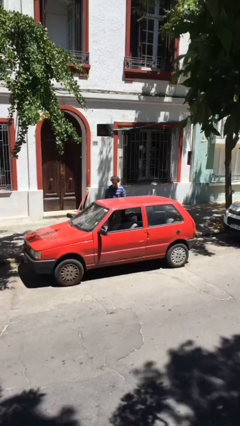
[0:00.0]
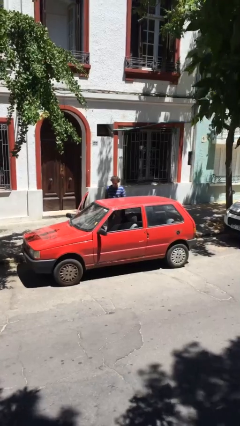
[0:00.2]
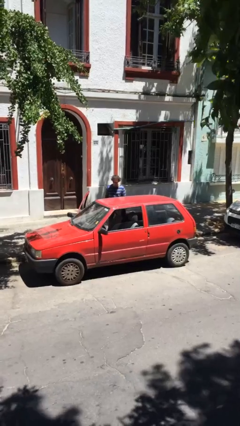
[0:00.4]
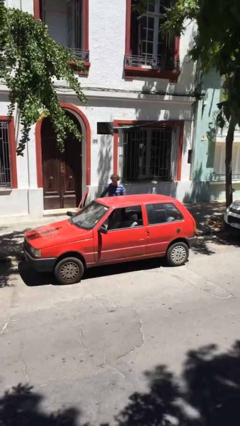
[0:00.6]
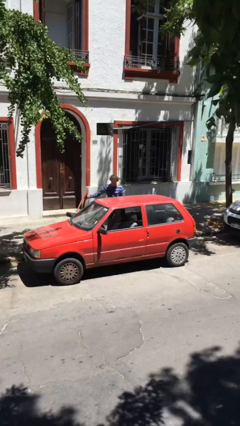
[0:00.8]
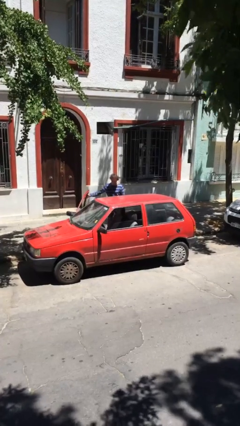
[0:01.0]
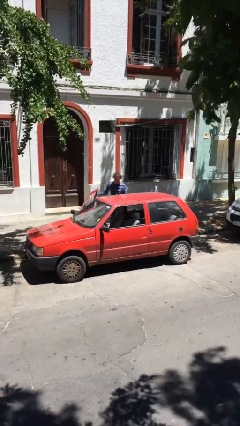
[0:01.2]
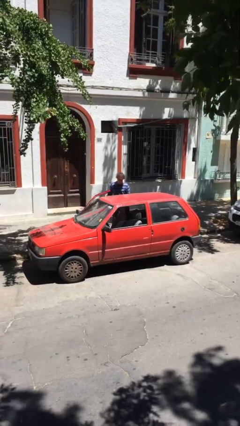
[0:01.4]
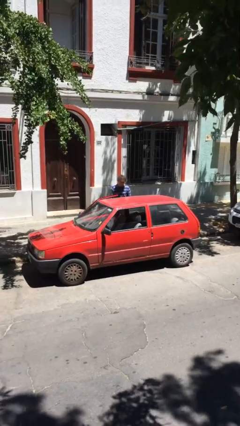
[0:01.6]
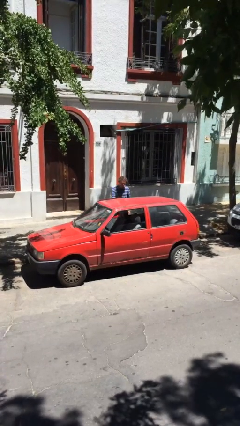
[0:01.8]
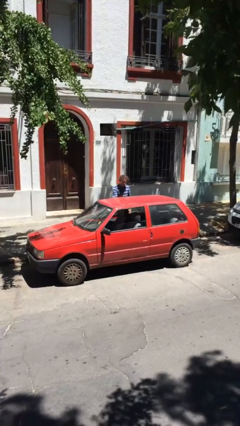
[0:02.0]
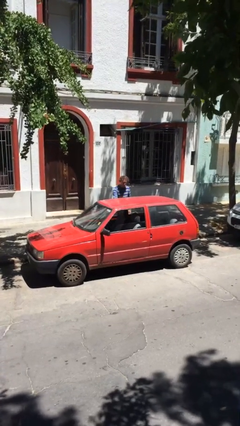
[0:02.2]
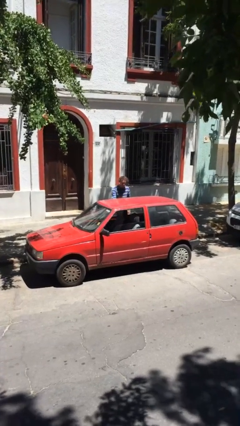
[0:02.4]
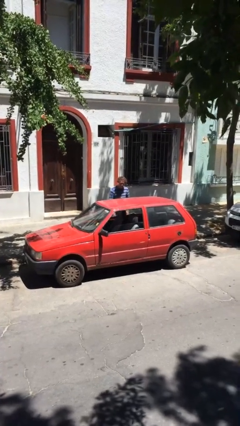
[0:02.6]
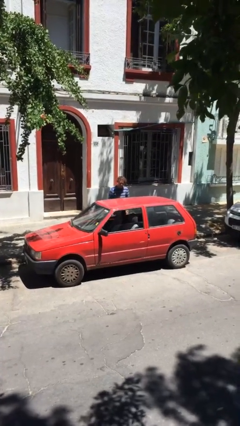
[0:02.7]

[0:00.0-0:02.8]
person closes car door

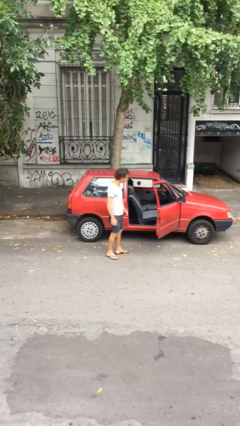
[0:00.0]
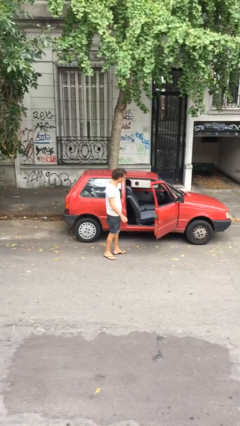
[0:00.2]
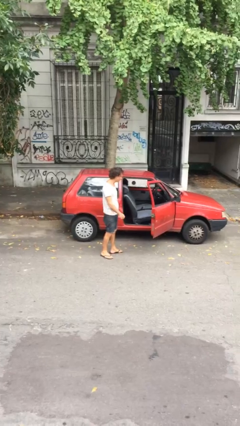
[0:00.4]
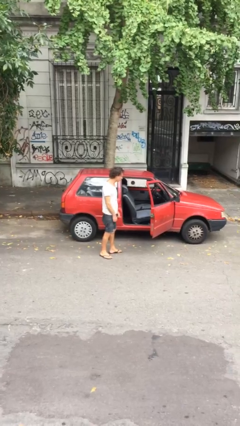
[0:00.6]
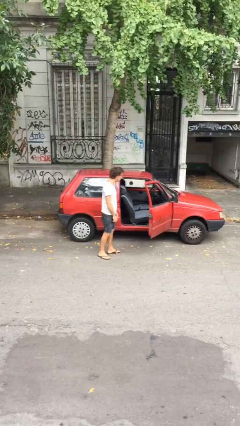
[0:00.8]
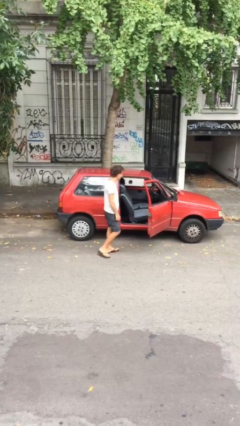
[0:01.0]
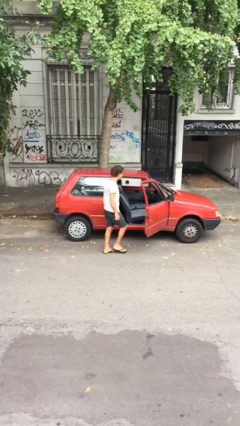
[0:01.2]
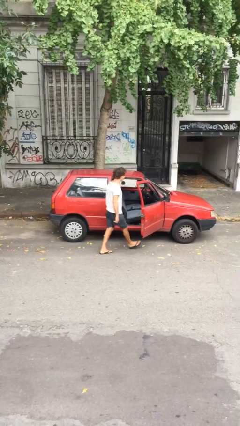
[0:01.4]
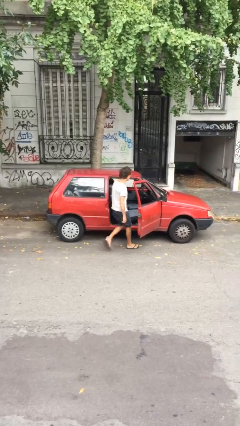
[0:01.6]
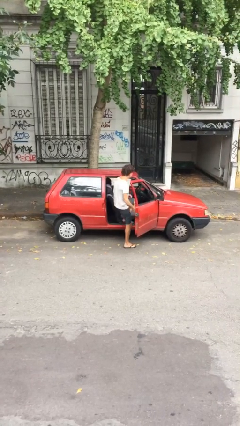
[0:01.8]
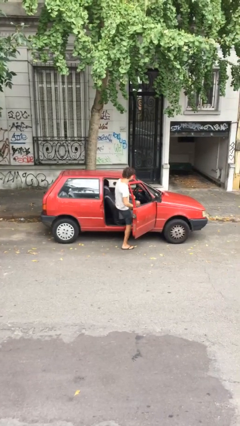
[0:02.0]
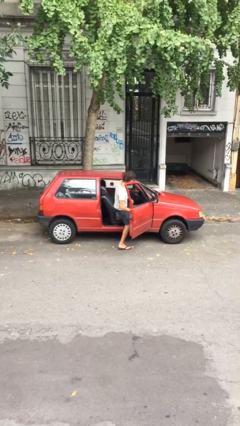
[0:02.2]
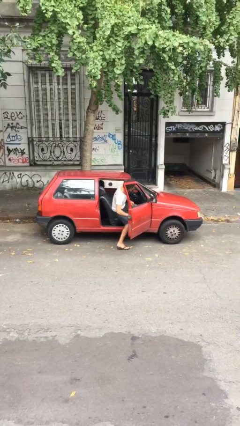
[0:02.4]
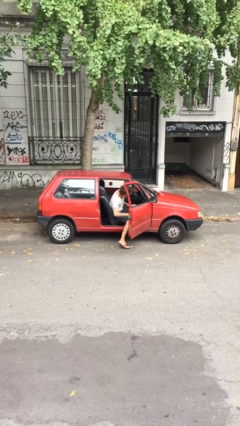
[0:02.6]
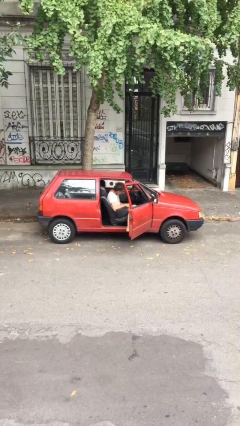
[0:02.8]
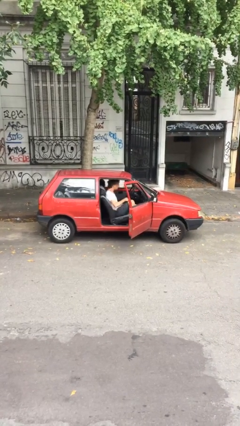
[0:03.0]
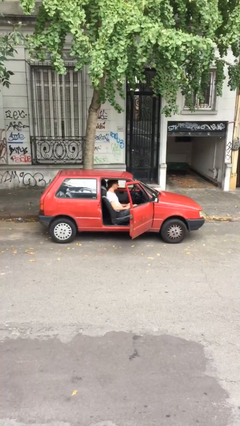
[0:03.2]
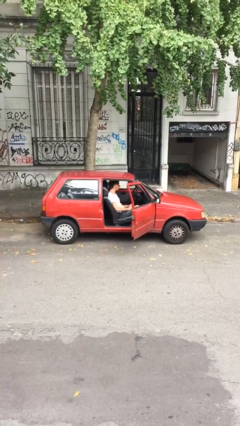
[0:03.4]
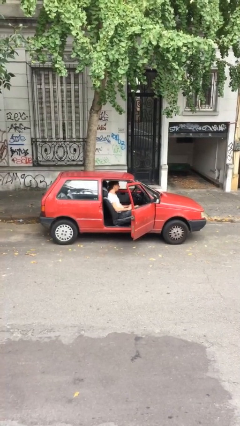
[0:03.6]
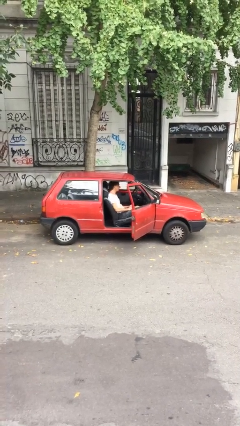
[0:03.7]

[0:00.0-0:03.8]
person enters car

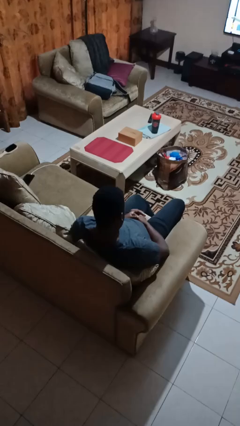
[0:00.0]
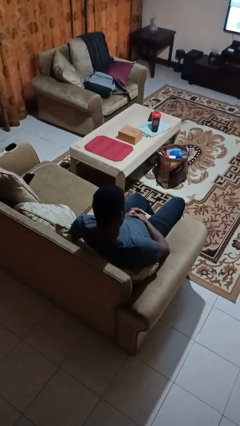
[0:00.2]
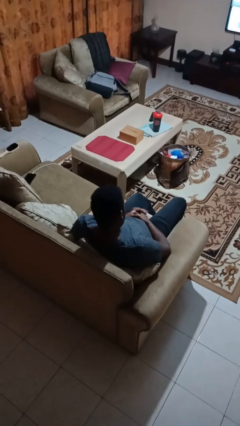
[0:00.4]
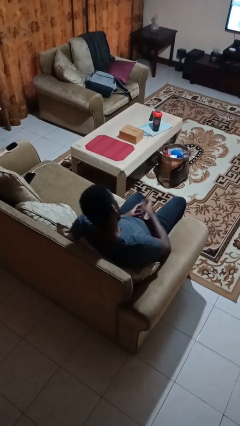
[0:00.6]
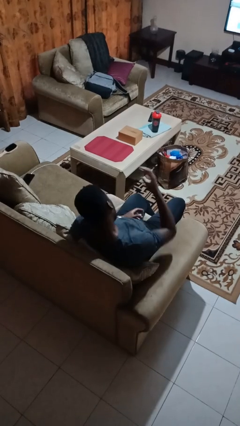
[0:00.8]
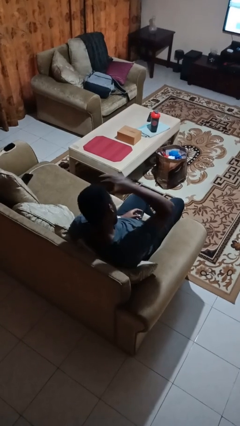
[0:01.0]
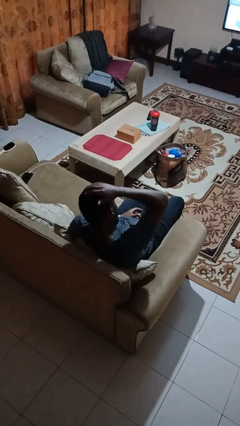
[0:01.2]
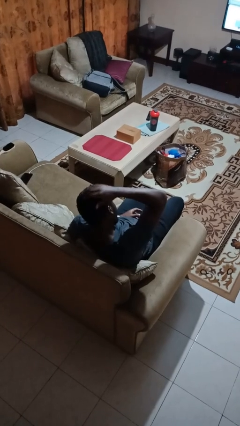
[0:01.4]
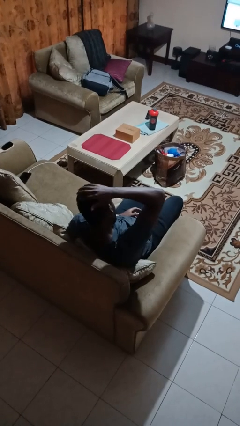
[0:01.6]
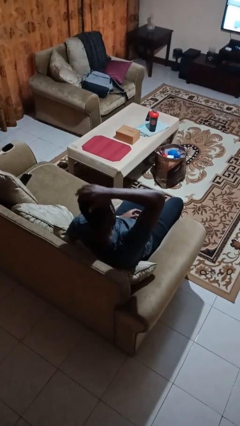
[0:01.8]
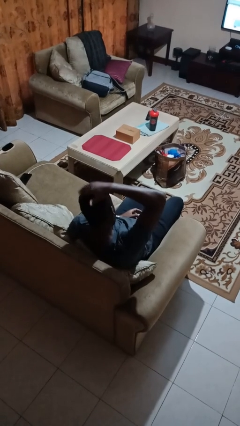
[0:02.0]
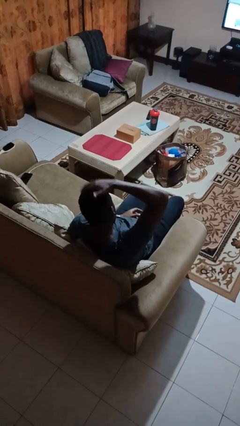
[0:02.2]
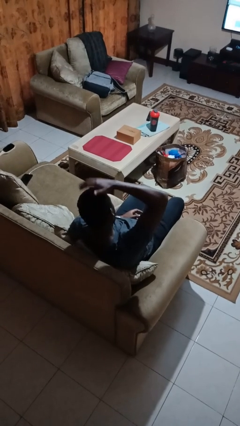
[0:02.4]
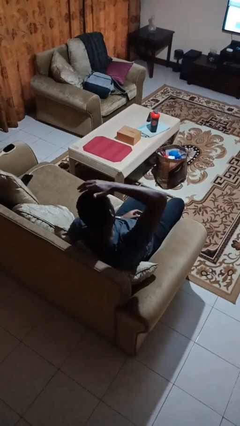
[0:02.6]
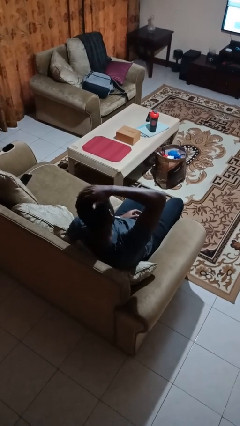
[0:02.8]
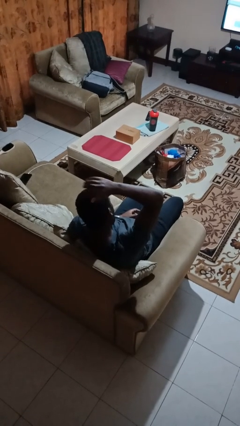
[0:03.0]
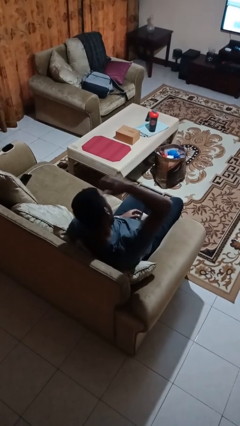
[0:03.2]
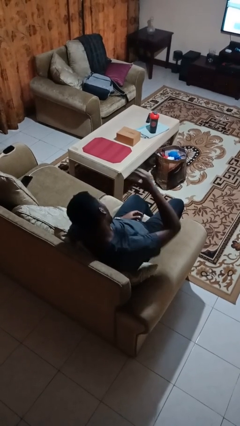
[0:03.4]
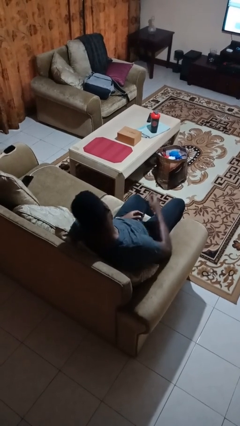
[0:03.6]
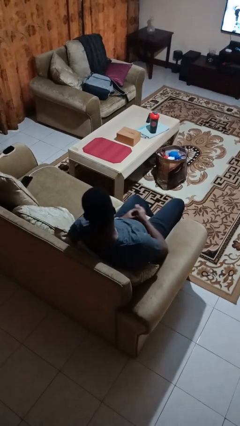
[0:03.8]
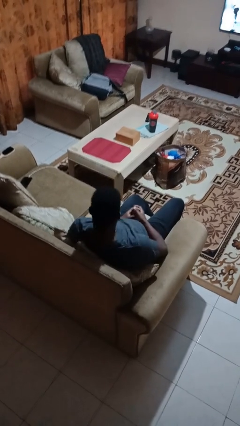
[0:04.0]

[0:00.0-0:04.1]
person pats head

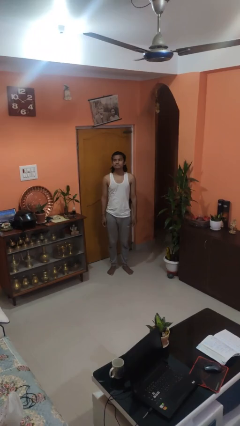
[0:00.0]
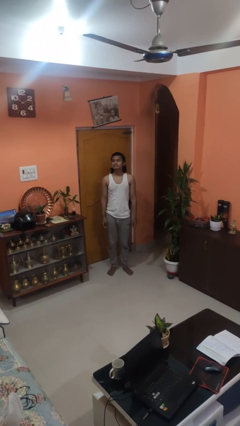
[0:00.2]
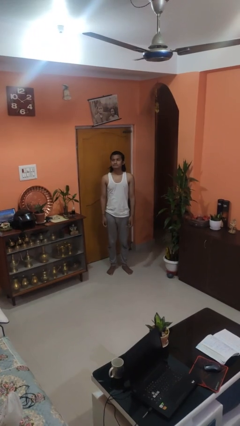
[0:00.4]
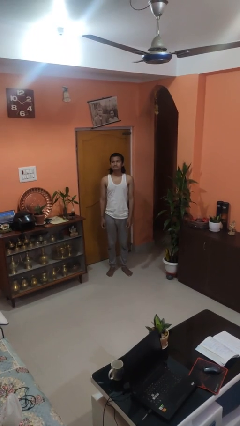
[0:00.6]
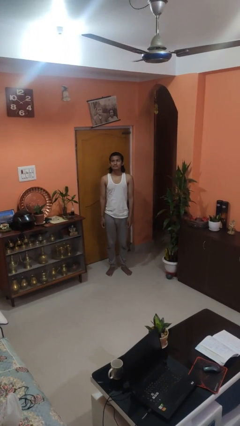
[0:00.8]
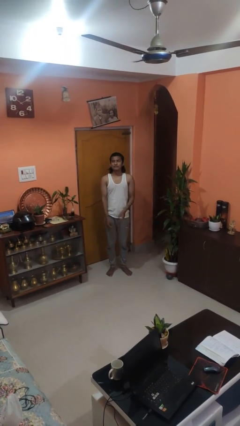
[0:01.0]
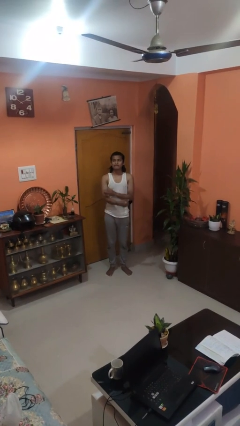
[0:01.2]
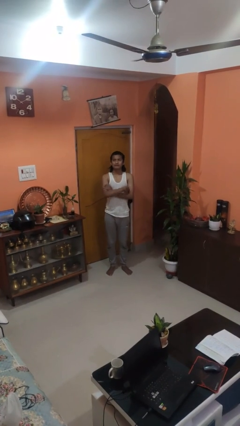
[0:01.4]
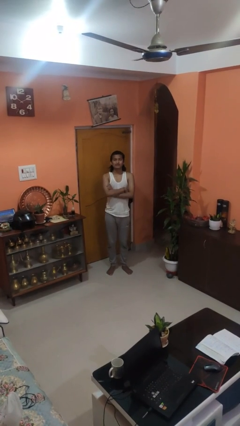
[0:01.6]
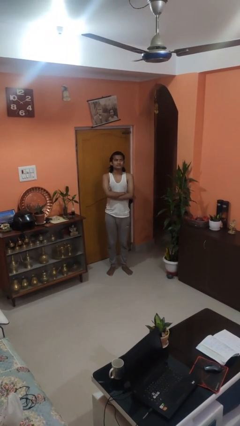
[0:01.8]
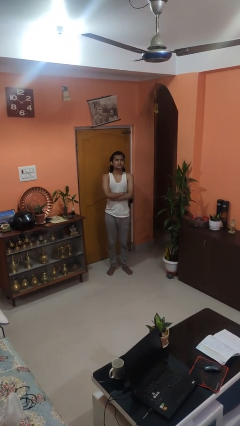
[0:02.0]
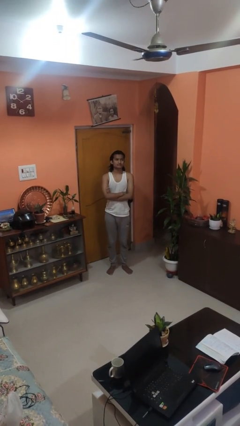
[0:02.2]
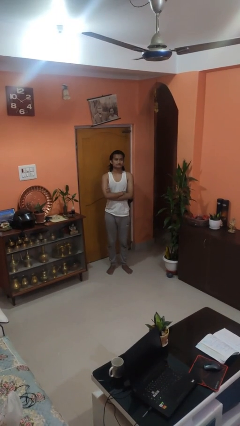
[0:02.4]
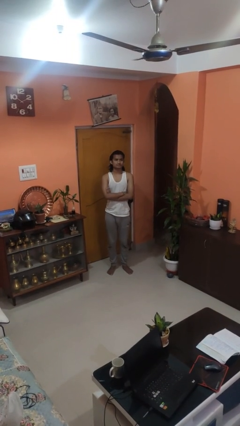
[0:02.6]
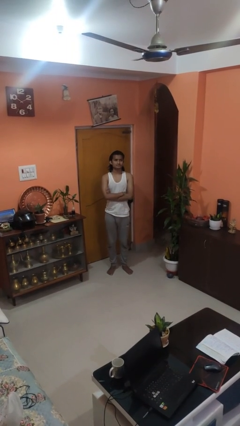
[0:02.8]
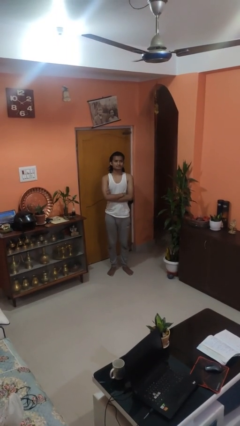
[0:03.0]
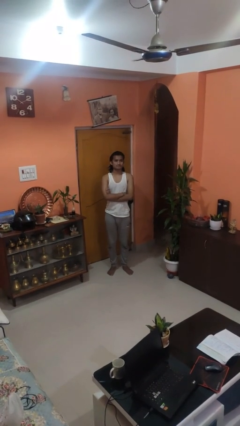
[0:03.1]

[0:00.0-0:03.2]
person crosses arms

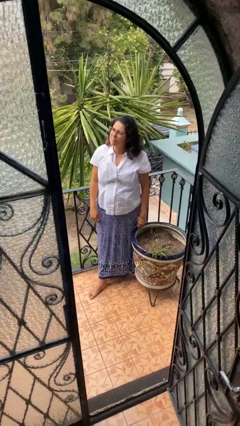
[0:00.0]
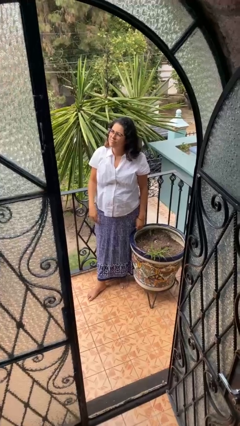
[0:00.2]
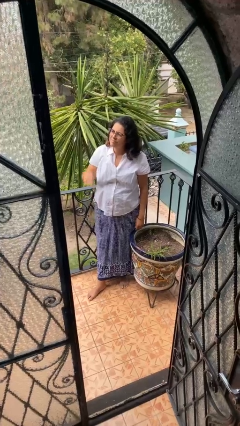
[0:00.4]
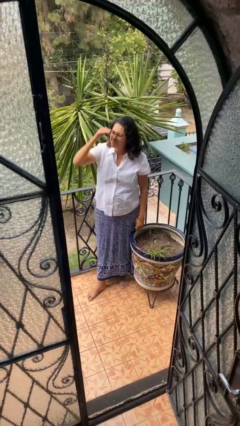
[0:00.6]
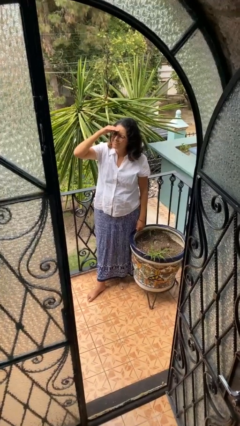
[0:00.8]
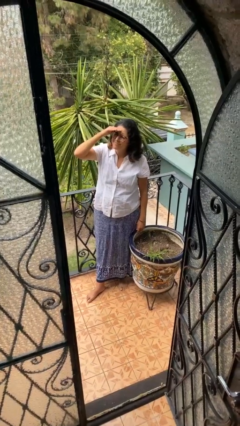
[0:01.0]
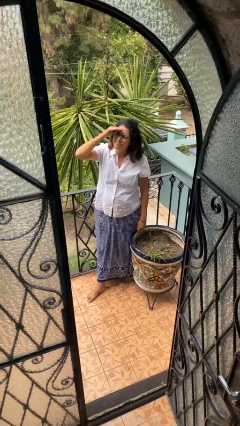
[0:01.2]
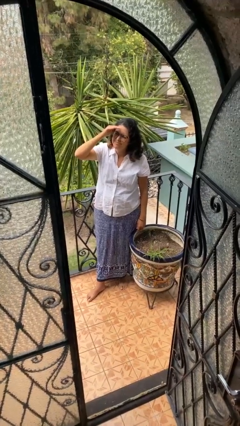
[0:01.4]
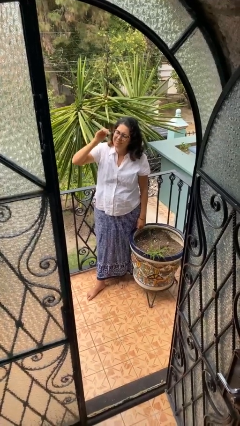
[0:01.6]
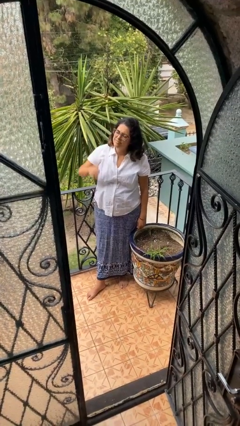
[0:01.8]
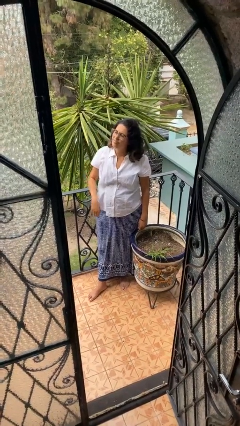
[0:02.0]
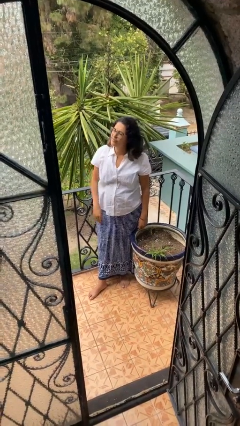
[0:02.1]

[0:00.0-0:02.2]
person shades eyes

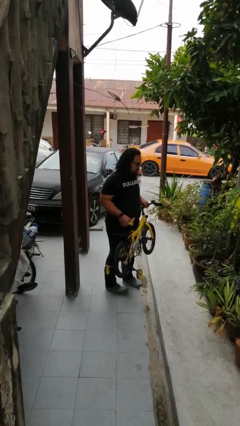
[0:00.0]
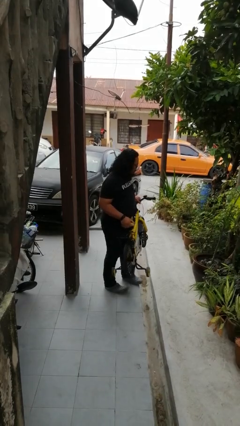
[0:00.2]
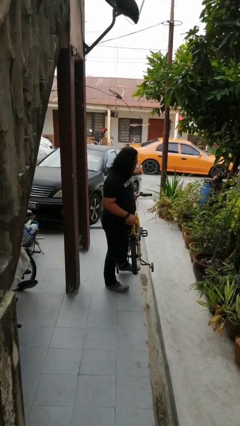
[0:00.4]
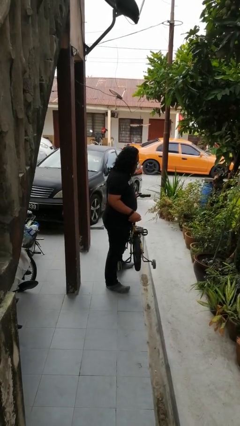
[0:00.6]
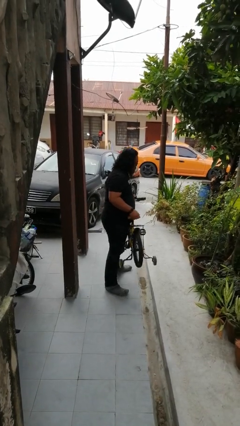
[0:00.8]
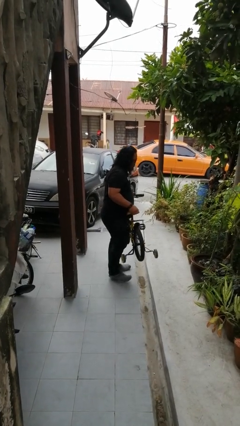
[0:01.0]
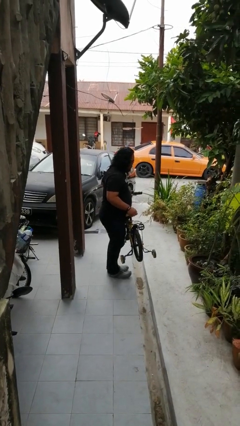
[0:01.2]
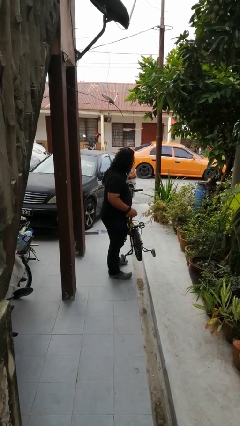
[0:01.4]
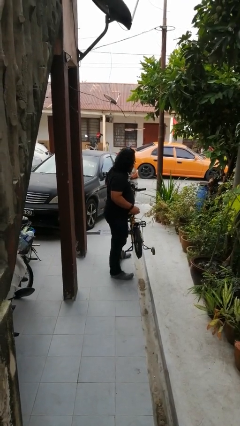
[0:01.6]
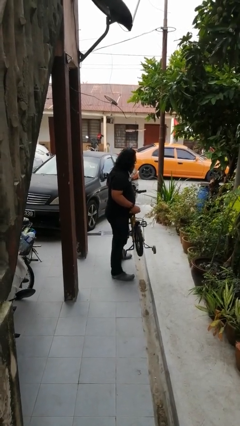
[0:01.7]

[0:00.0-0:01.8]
person carries bicycle
